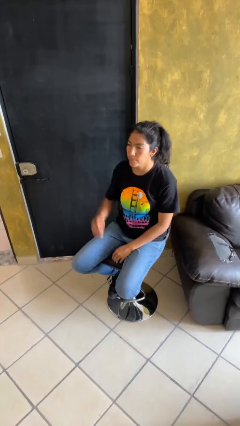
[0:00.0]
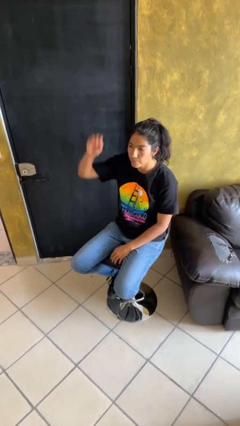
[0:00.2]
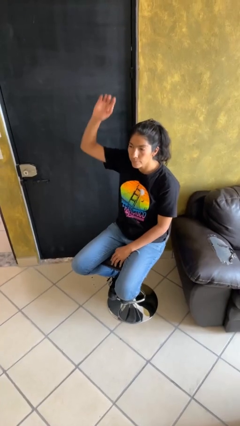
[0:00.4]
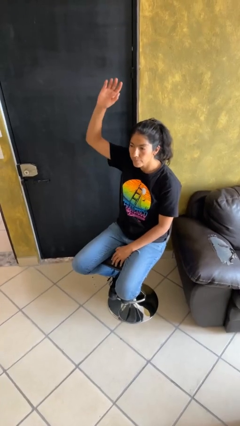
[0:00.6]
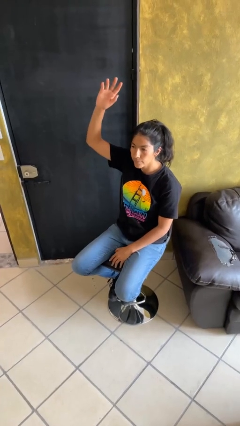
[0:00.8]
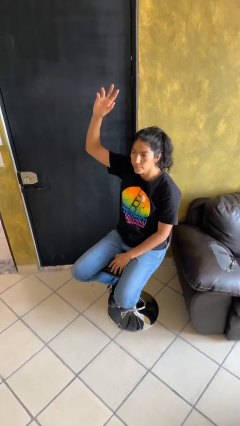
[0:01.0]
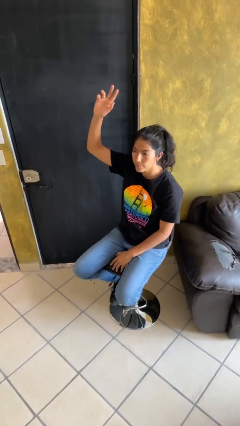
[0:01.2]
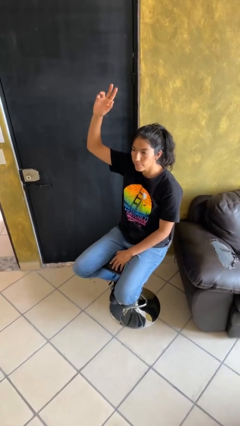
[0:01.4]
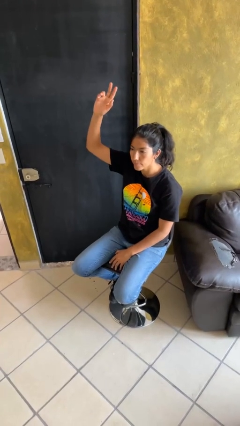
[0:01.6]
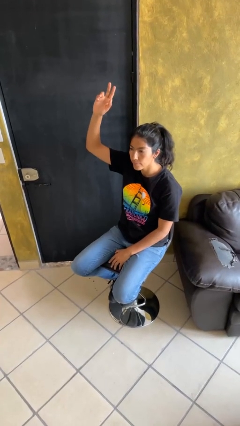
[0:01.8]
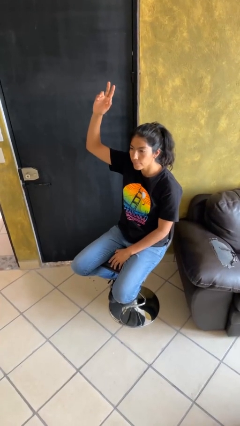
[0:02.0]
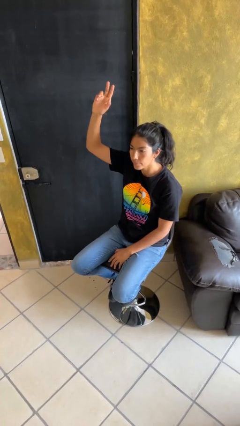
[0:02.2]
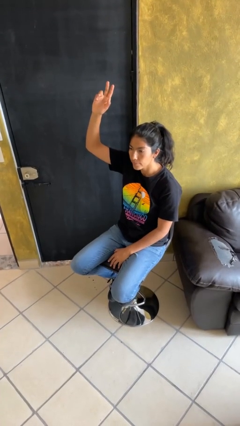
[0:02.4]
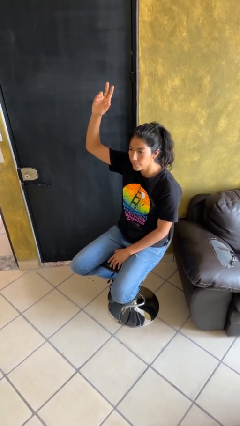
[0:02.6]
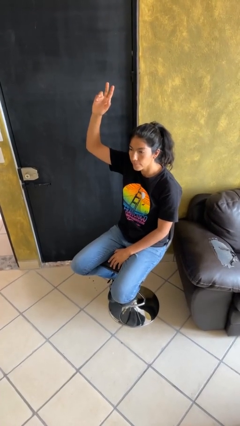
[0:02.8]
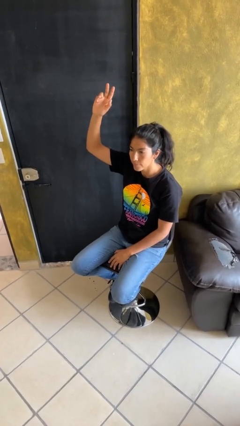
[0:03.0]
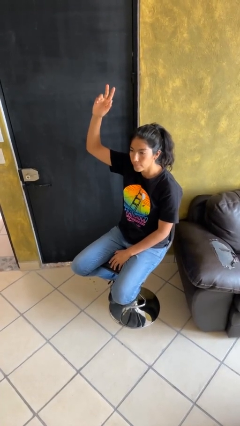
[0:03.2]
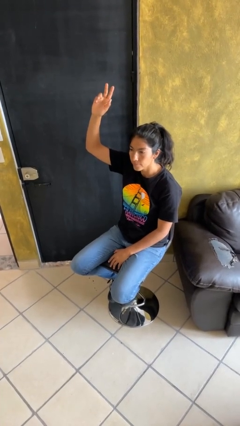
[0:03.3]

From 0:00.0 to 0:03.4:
person gestures raise hand

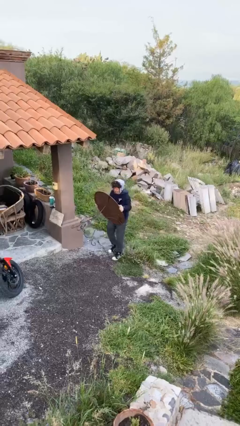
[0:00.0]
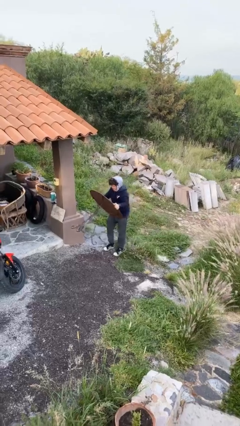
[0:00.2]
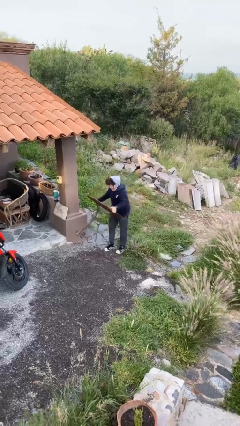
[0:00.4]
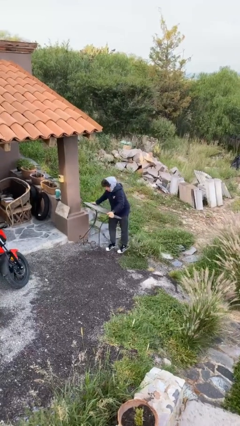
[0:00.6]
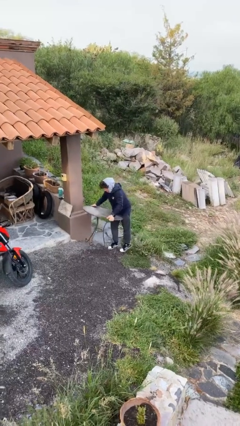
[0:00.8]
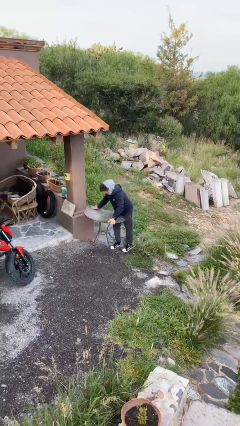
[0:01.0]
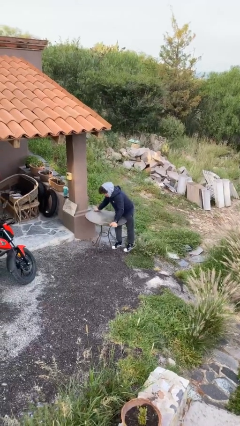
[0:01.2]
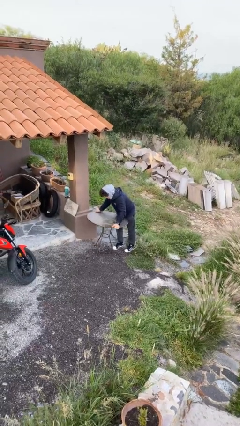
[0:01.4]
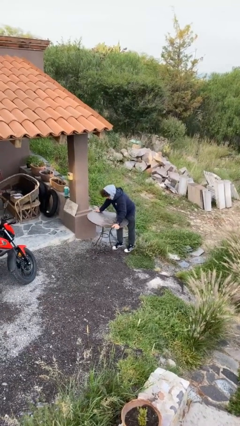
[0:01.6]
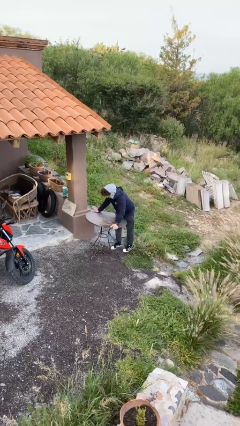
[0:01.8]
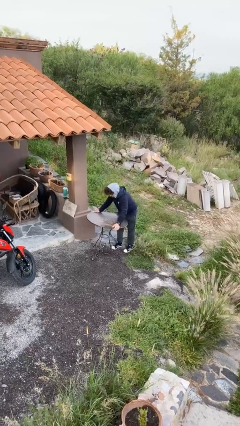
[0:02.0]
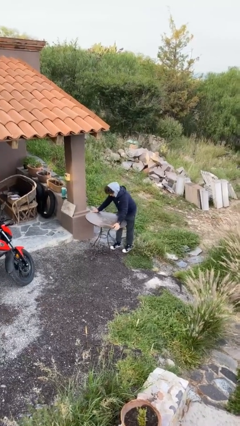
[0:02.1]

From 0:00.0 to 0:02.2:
person puts down object on floor

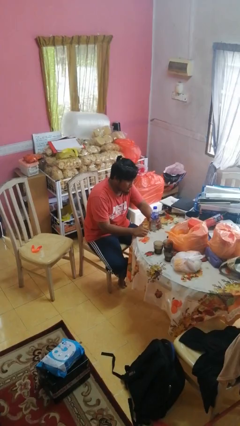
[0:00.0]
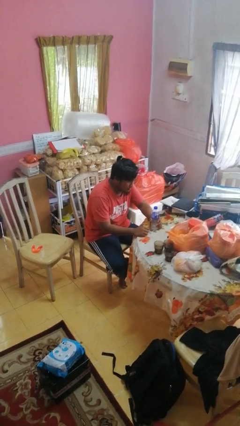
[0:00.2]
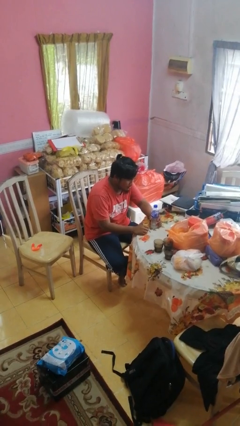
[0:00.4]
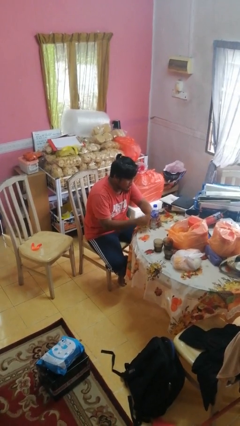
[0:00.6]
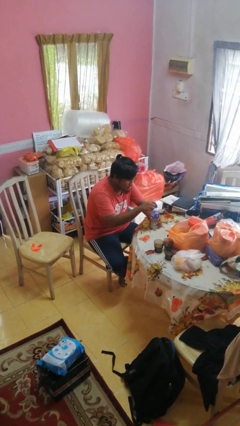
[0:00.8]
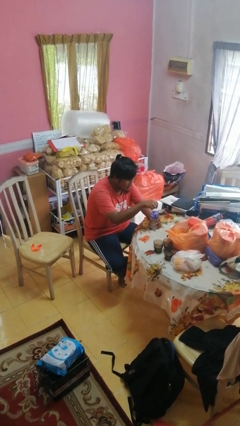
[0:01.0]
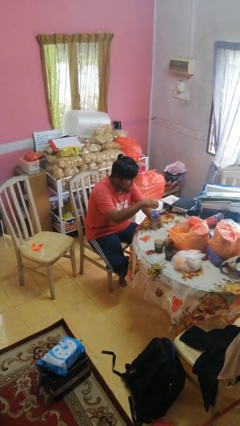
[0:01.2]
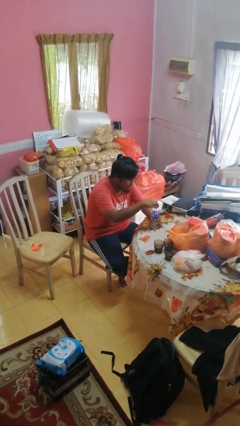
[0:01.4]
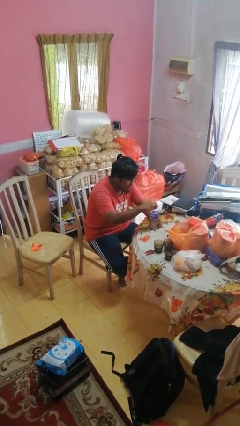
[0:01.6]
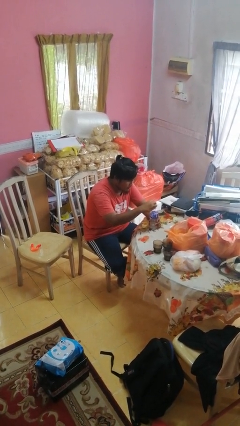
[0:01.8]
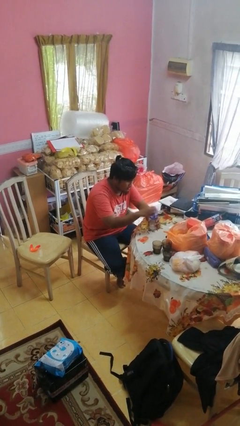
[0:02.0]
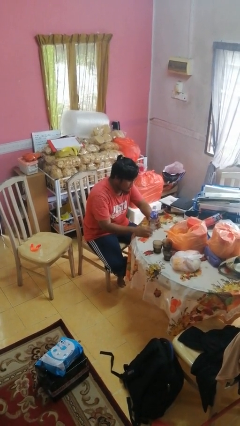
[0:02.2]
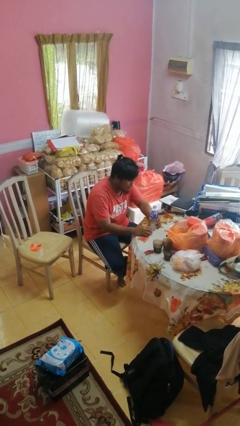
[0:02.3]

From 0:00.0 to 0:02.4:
person unscrews lid from bottle

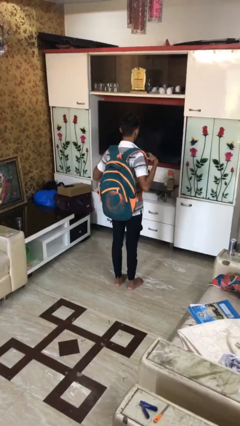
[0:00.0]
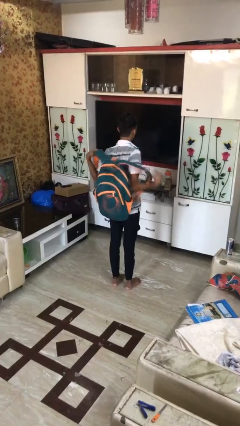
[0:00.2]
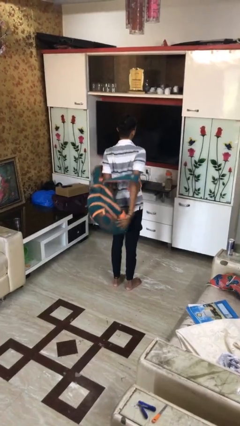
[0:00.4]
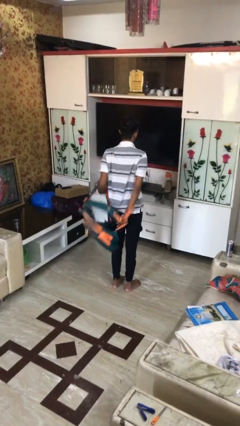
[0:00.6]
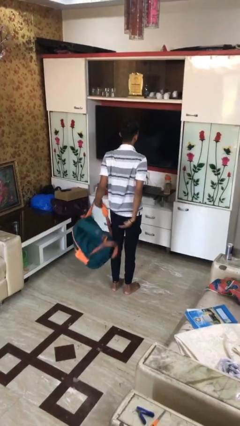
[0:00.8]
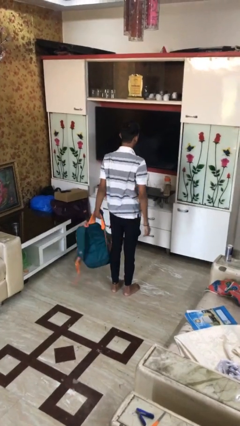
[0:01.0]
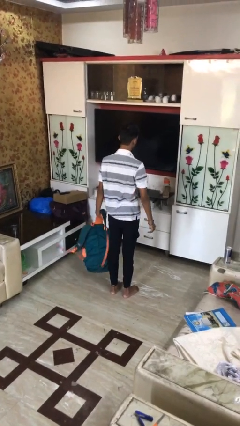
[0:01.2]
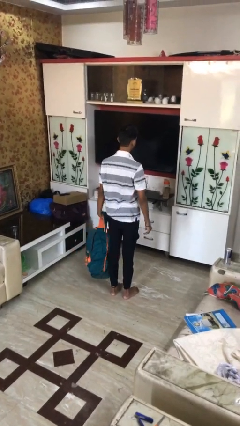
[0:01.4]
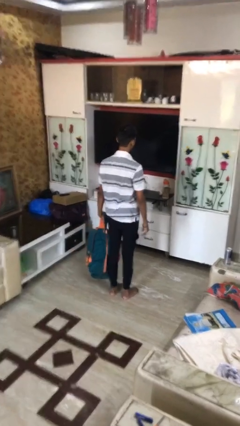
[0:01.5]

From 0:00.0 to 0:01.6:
person takes off backpack

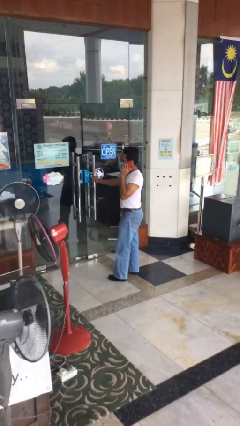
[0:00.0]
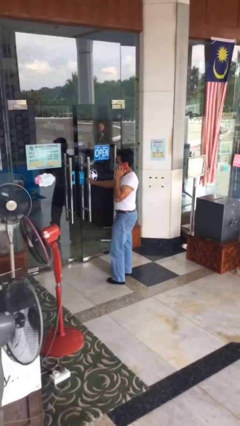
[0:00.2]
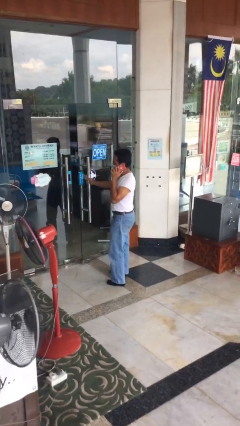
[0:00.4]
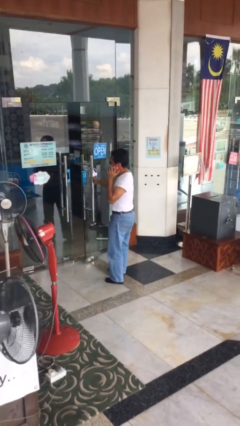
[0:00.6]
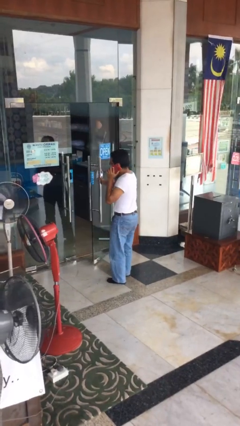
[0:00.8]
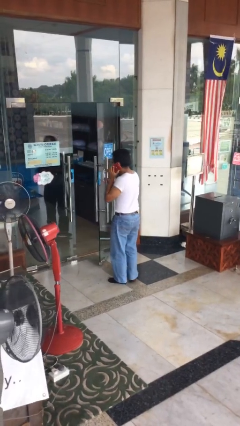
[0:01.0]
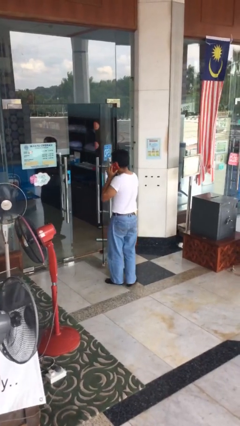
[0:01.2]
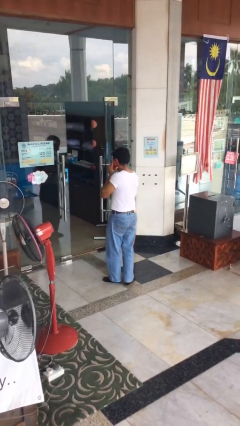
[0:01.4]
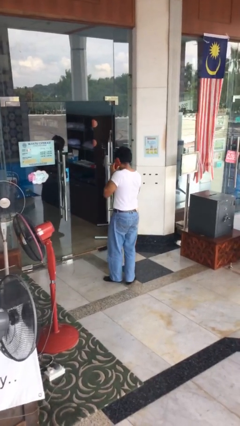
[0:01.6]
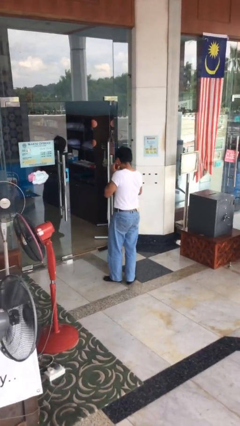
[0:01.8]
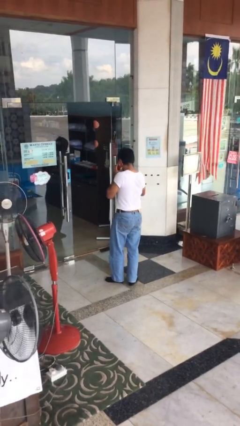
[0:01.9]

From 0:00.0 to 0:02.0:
person opens facility door

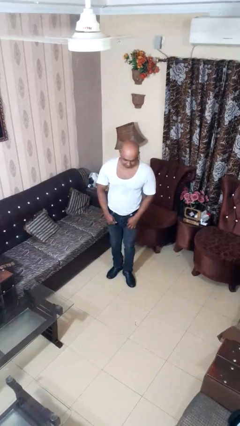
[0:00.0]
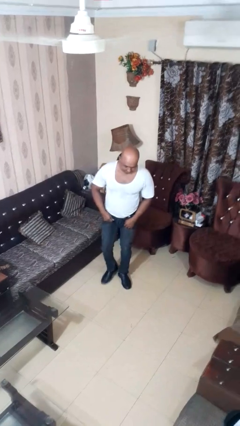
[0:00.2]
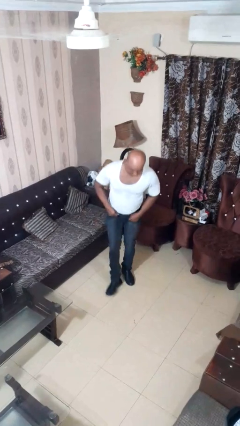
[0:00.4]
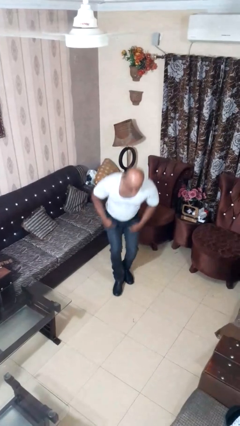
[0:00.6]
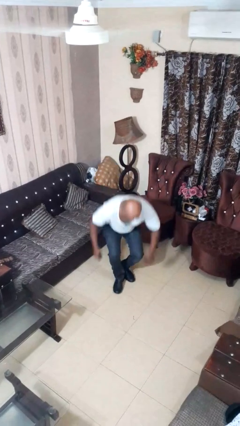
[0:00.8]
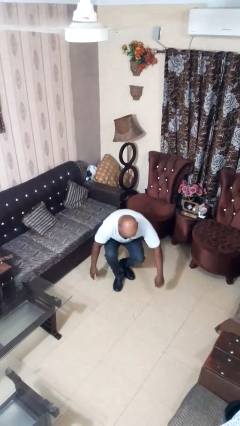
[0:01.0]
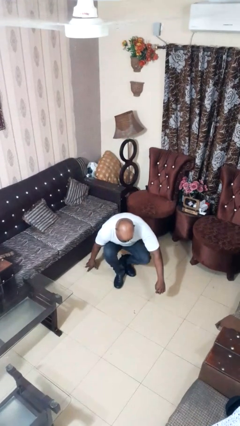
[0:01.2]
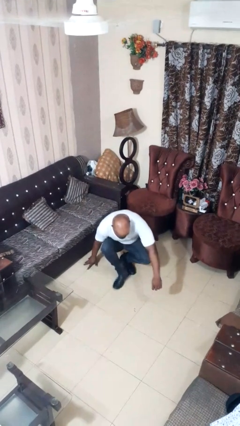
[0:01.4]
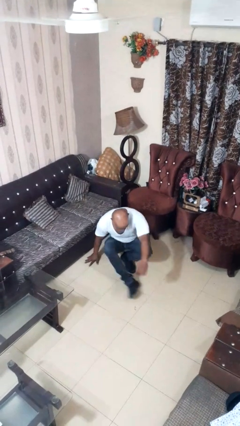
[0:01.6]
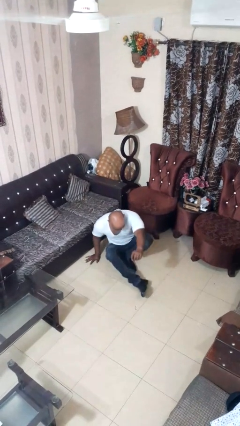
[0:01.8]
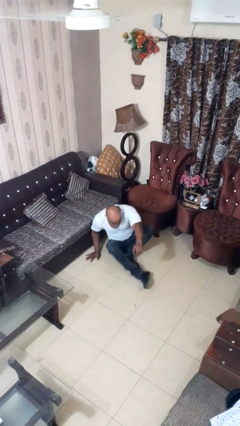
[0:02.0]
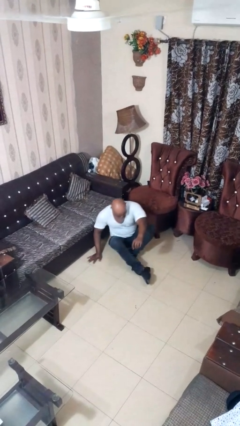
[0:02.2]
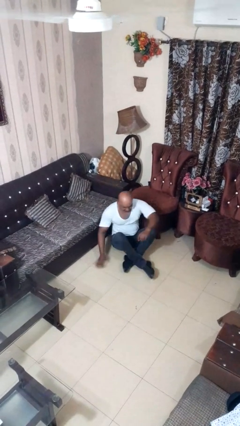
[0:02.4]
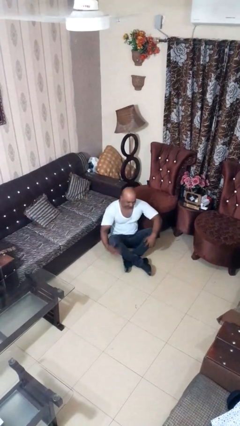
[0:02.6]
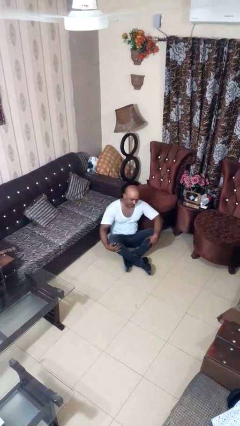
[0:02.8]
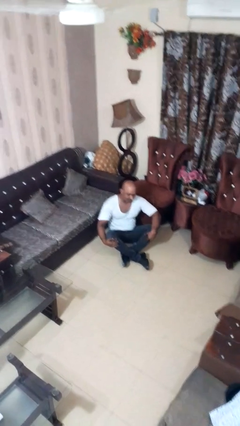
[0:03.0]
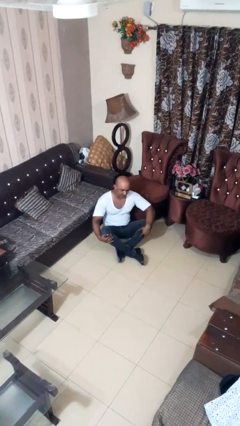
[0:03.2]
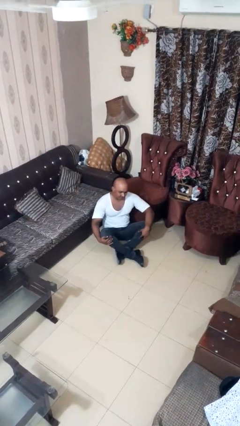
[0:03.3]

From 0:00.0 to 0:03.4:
person sits crisscross

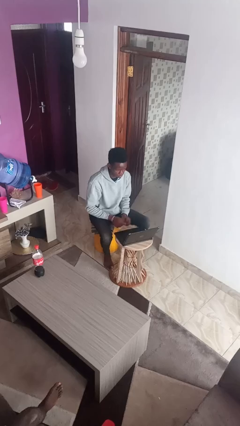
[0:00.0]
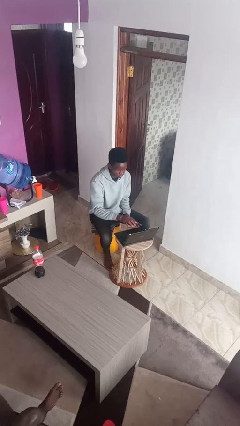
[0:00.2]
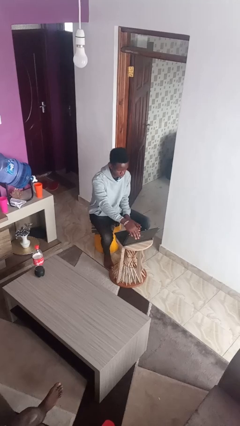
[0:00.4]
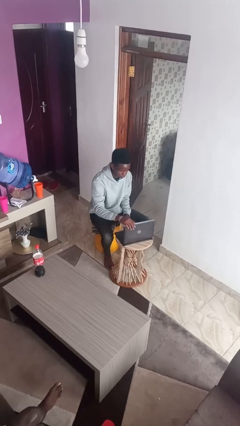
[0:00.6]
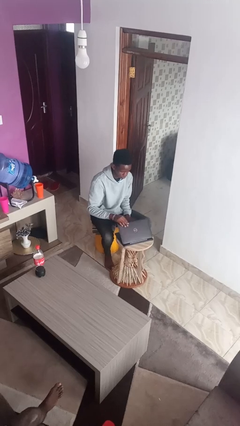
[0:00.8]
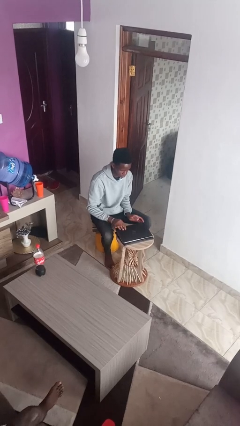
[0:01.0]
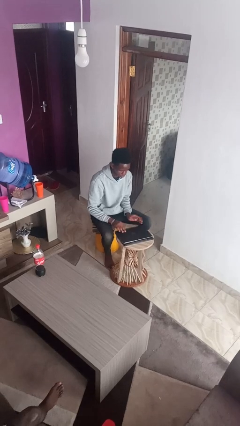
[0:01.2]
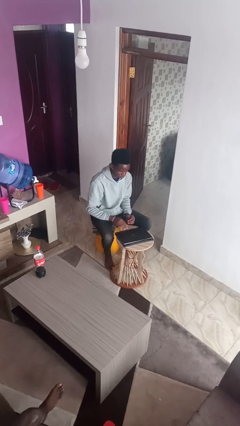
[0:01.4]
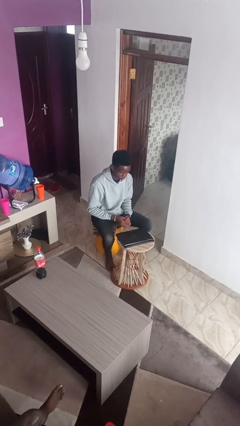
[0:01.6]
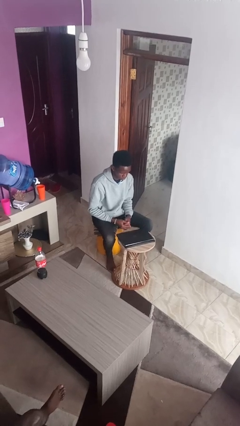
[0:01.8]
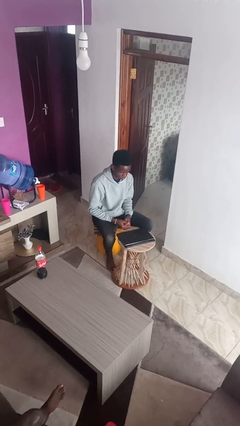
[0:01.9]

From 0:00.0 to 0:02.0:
person closes laptop

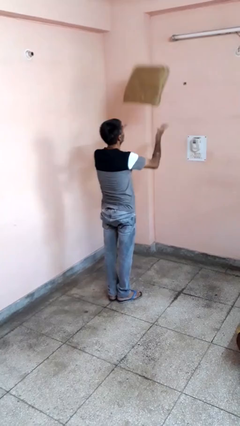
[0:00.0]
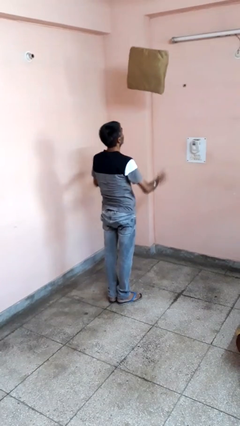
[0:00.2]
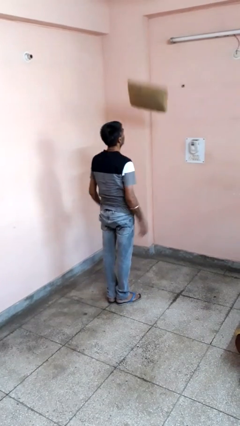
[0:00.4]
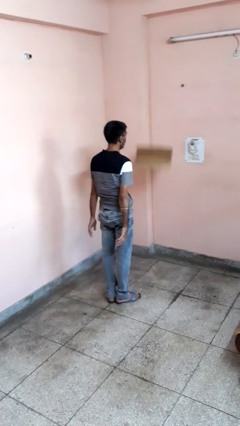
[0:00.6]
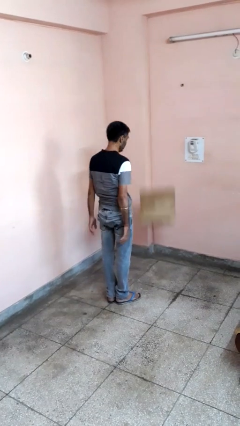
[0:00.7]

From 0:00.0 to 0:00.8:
person throws object into air
